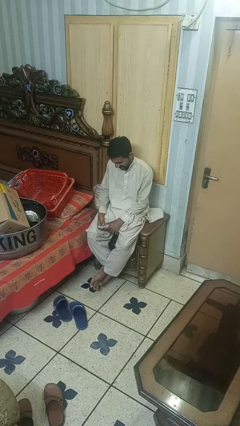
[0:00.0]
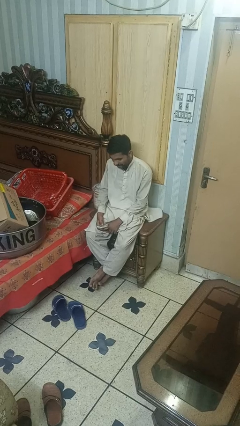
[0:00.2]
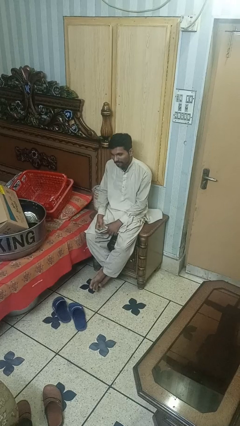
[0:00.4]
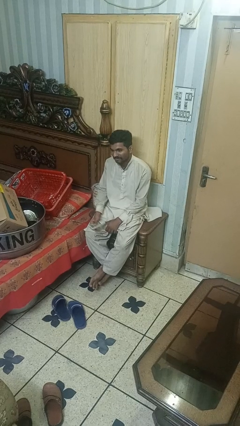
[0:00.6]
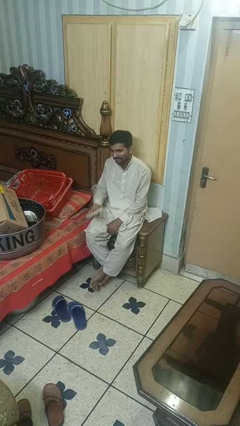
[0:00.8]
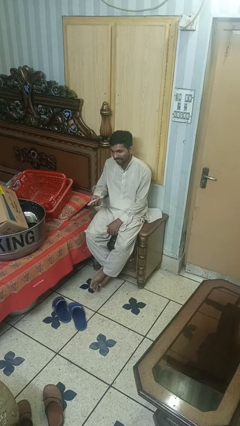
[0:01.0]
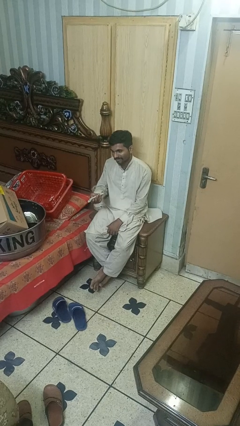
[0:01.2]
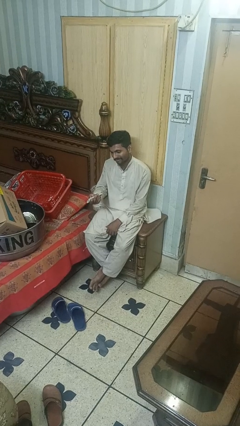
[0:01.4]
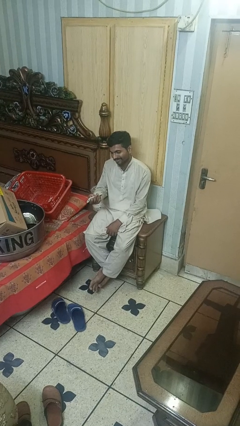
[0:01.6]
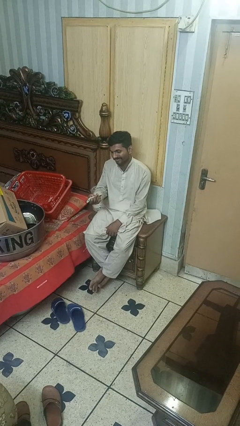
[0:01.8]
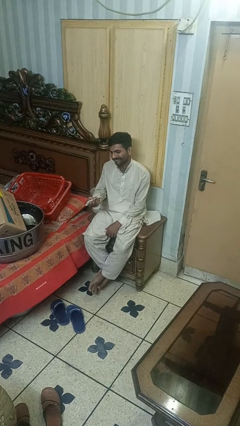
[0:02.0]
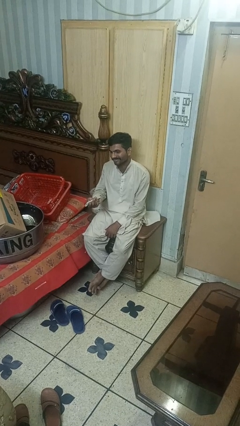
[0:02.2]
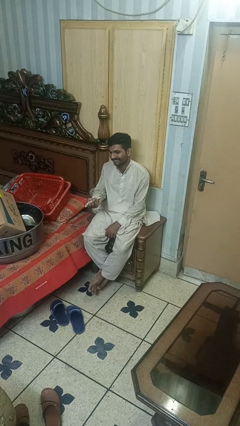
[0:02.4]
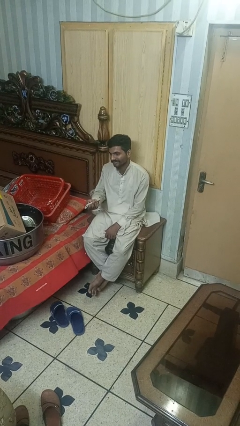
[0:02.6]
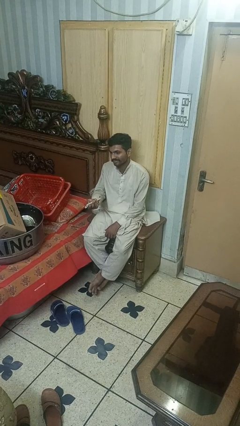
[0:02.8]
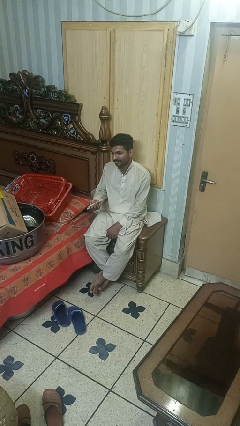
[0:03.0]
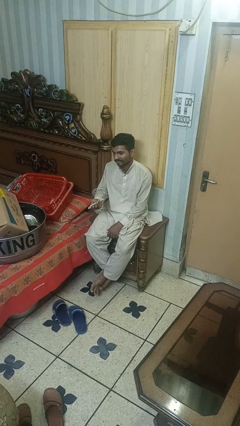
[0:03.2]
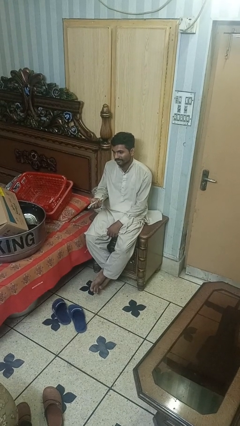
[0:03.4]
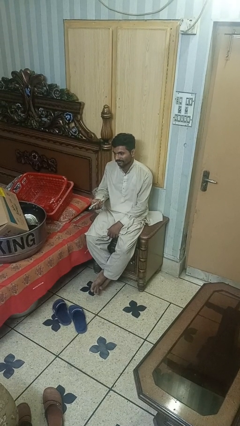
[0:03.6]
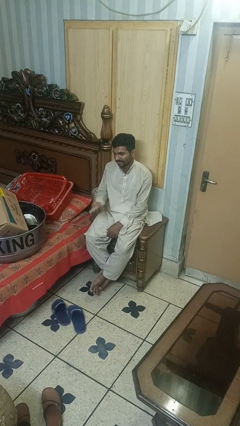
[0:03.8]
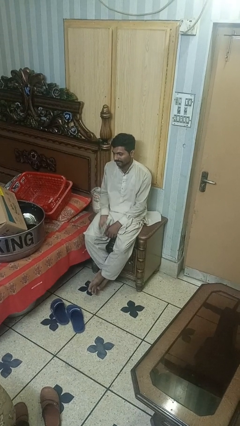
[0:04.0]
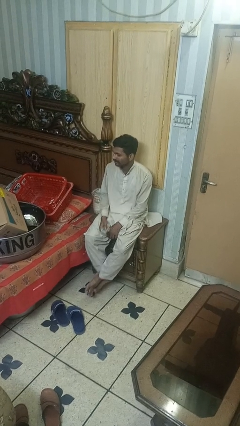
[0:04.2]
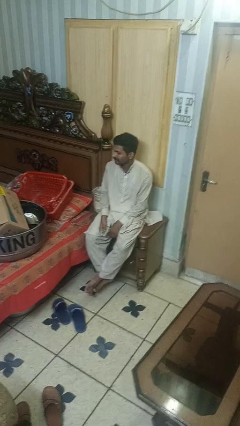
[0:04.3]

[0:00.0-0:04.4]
person uses television remote

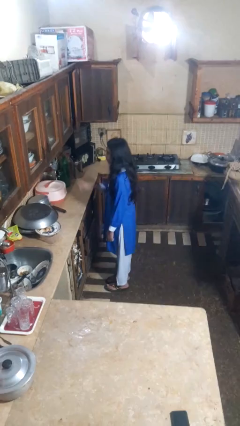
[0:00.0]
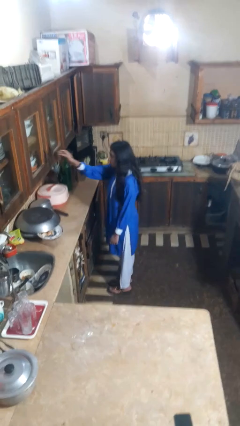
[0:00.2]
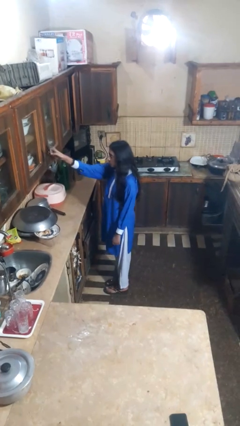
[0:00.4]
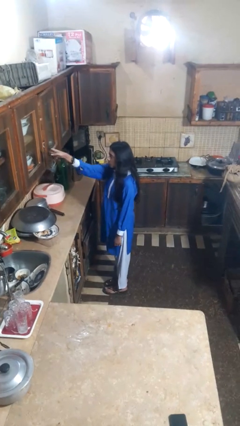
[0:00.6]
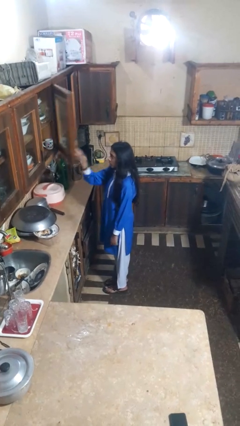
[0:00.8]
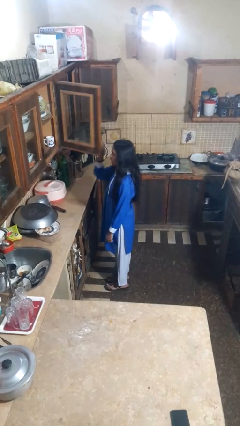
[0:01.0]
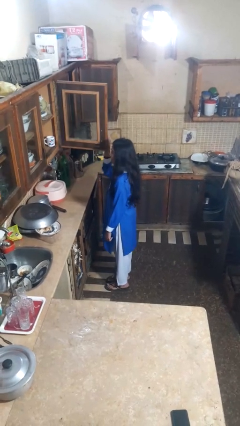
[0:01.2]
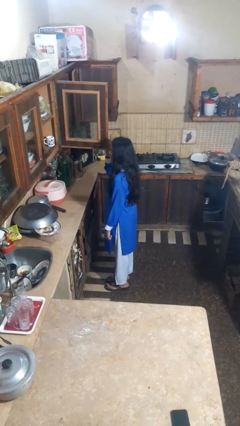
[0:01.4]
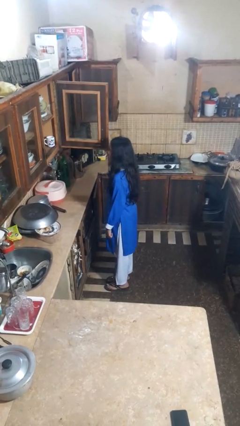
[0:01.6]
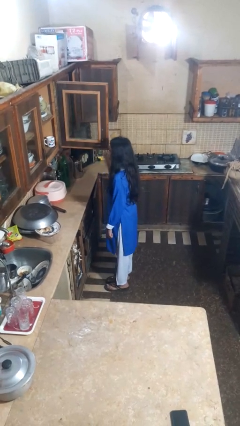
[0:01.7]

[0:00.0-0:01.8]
person opens cabinet

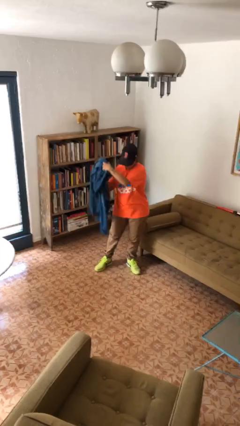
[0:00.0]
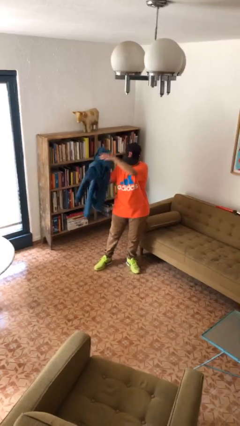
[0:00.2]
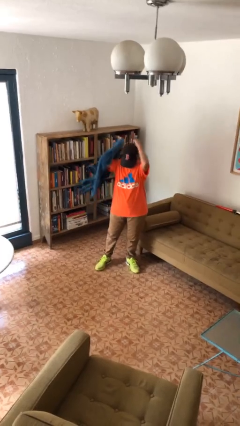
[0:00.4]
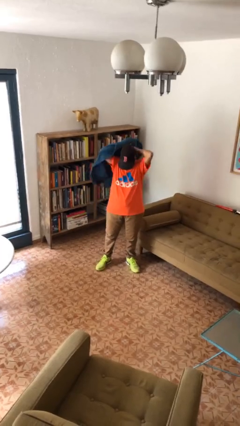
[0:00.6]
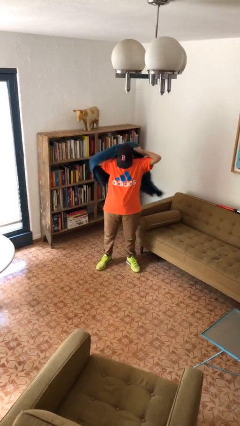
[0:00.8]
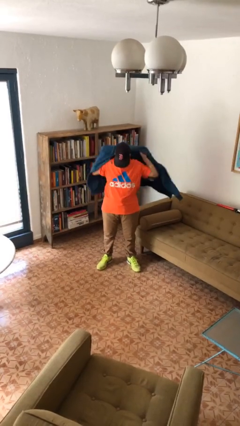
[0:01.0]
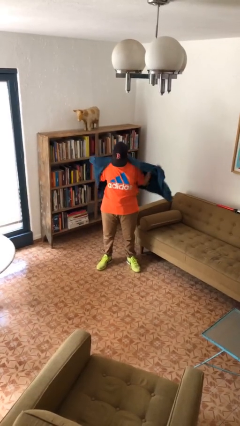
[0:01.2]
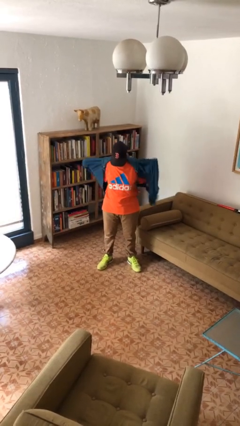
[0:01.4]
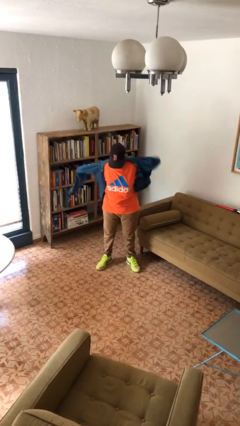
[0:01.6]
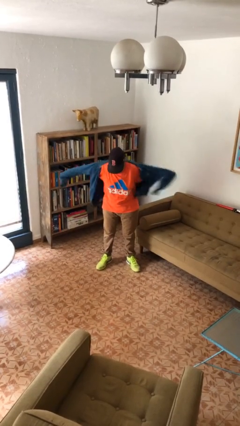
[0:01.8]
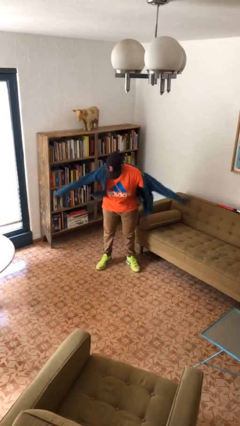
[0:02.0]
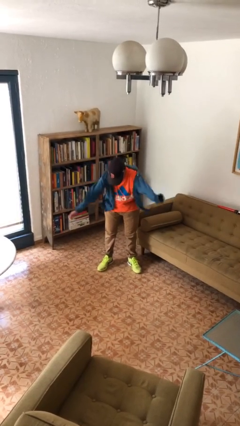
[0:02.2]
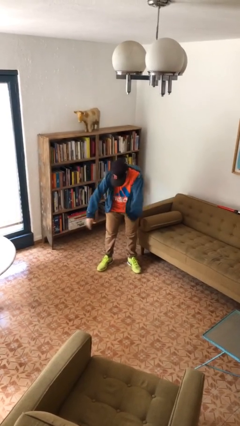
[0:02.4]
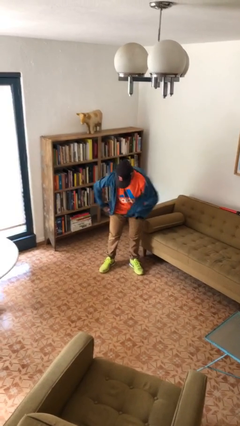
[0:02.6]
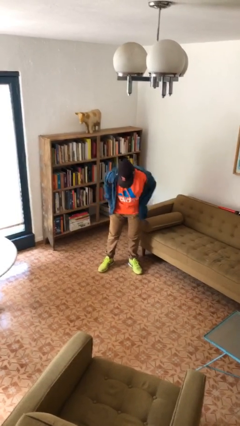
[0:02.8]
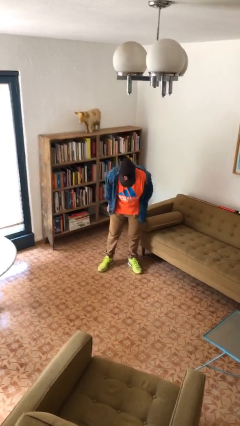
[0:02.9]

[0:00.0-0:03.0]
person puts on jacket

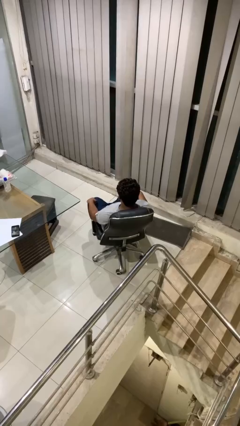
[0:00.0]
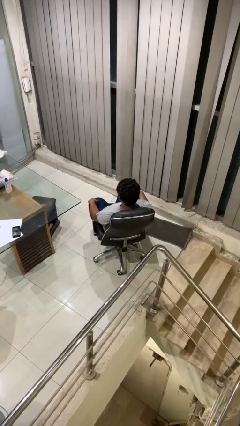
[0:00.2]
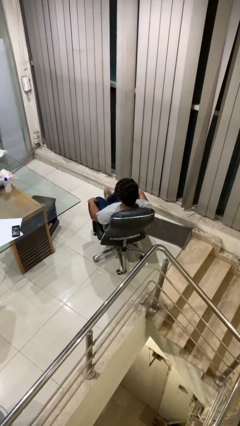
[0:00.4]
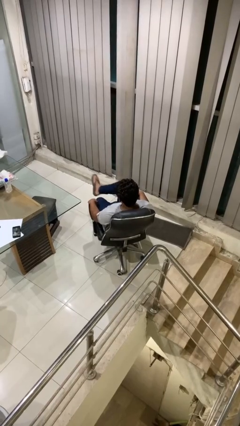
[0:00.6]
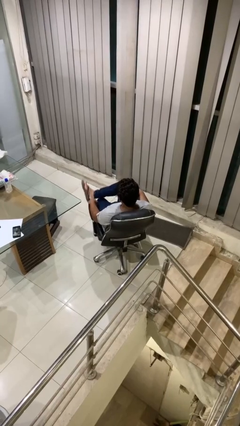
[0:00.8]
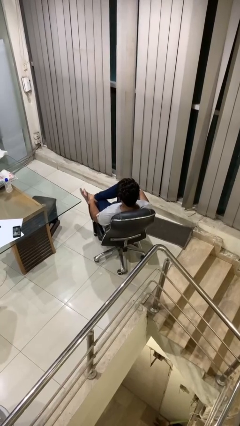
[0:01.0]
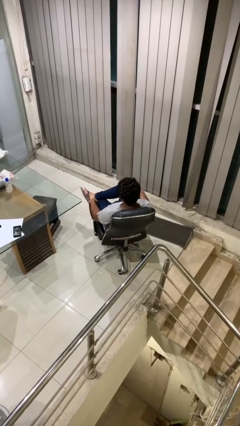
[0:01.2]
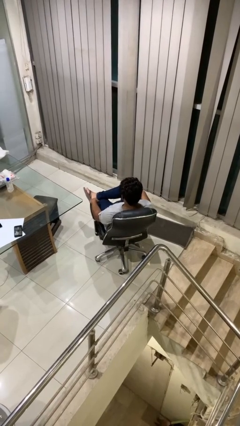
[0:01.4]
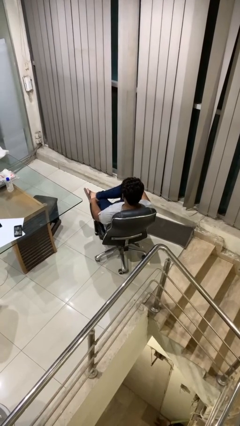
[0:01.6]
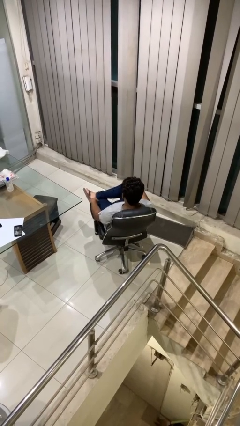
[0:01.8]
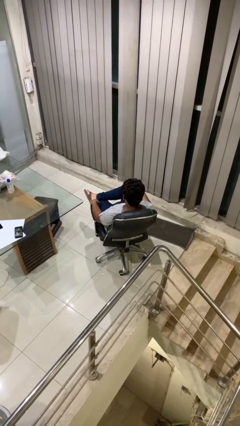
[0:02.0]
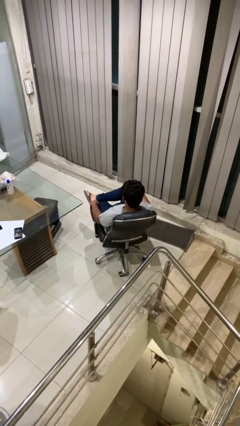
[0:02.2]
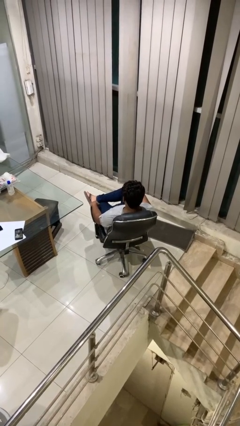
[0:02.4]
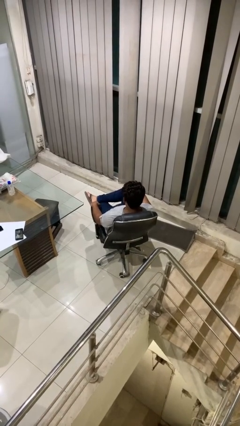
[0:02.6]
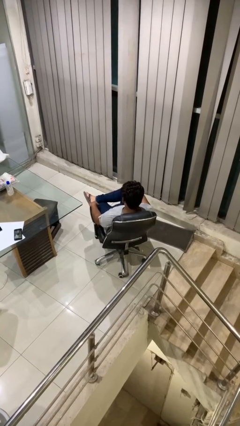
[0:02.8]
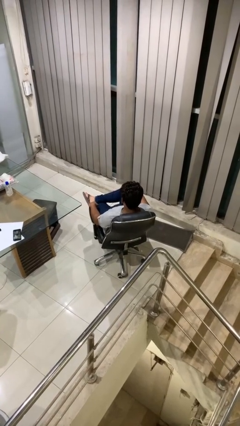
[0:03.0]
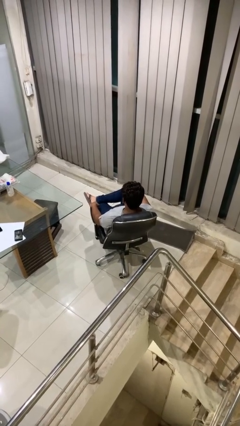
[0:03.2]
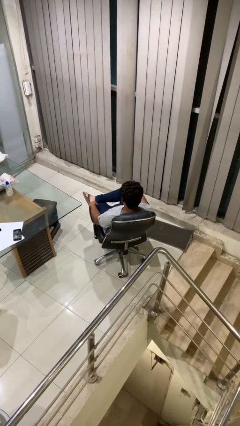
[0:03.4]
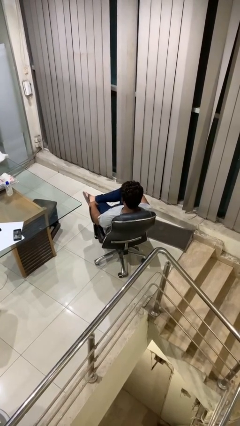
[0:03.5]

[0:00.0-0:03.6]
person crosses legs

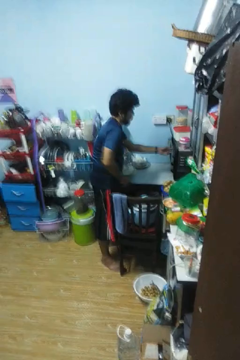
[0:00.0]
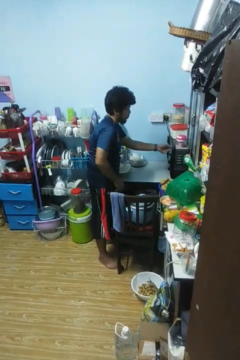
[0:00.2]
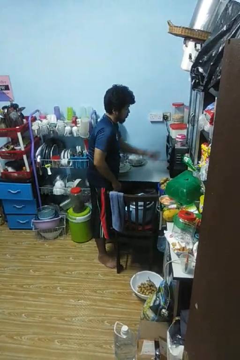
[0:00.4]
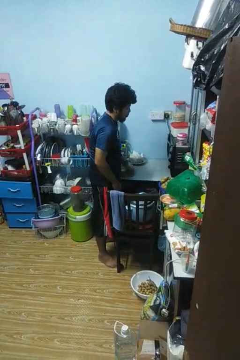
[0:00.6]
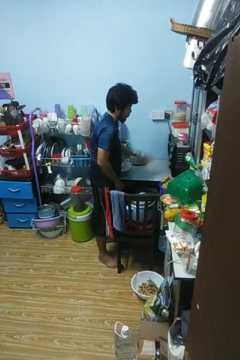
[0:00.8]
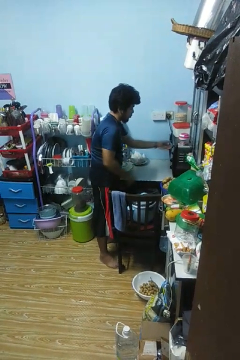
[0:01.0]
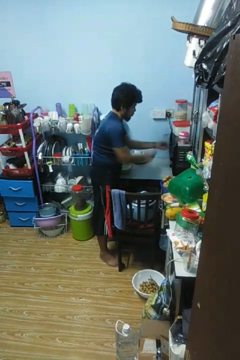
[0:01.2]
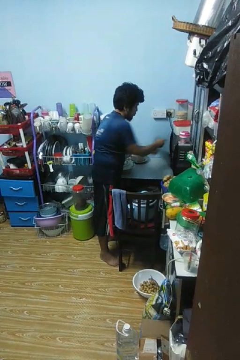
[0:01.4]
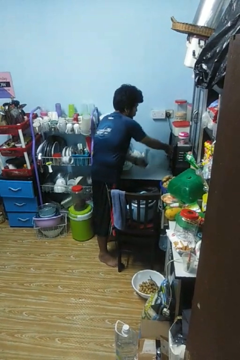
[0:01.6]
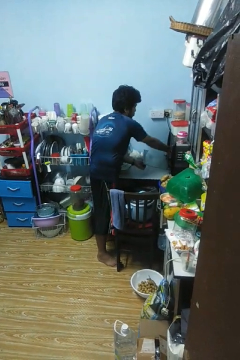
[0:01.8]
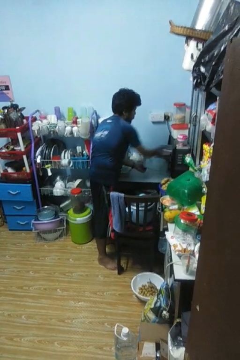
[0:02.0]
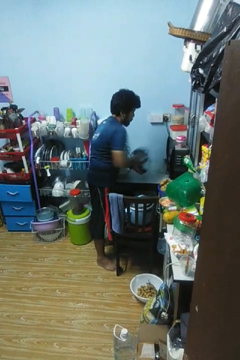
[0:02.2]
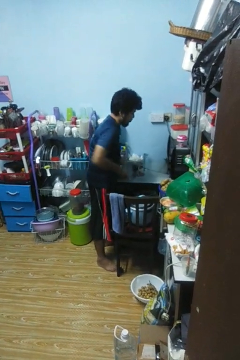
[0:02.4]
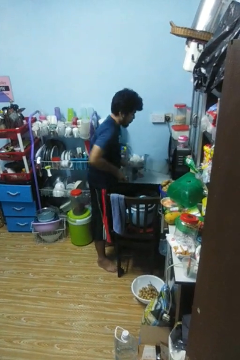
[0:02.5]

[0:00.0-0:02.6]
person takes object from oven

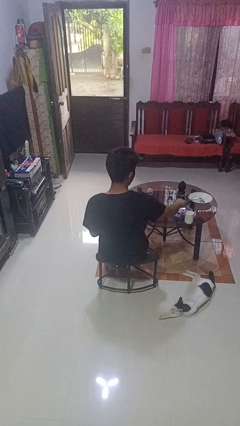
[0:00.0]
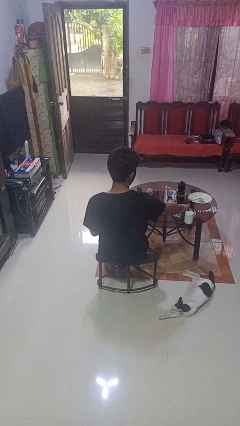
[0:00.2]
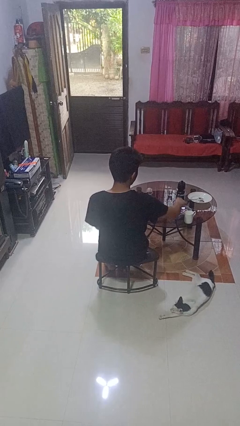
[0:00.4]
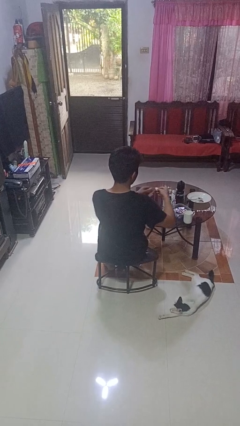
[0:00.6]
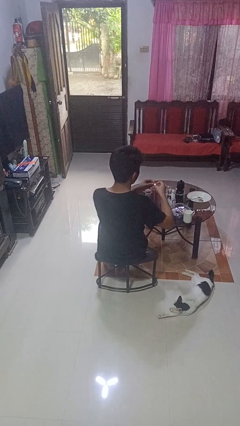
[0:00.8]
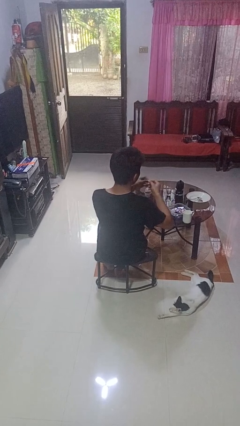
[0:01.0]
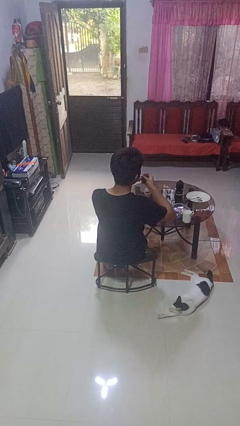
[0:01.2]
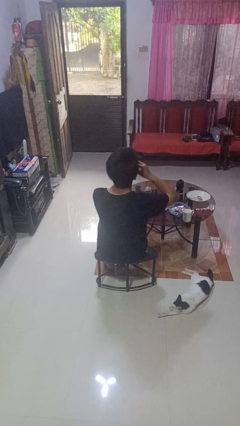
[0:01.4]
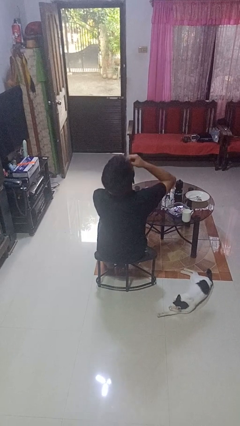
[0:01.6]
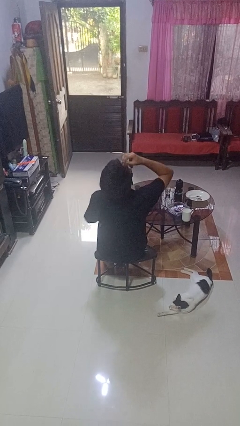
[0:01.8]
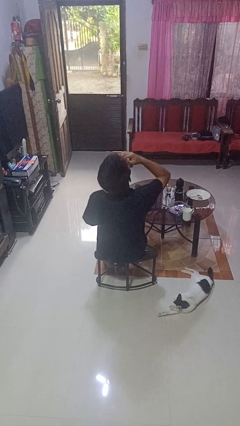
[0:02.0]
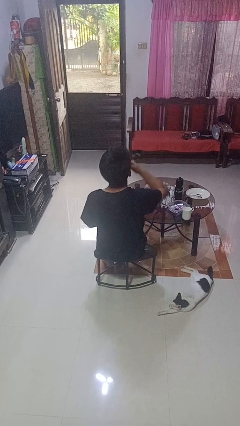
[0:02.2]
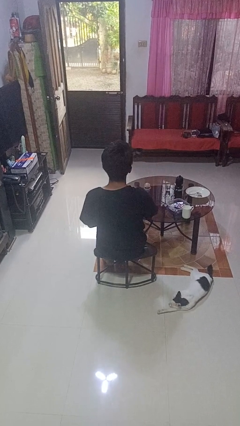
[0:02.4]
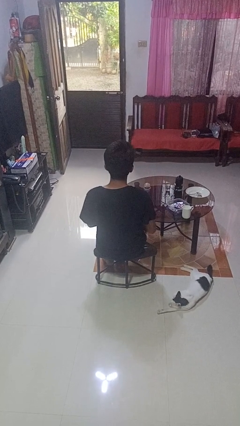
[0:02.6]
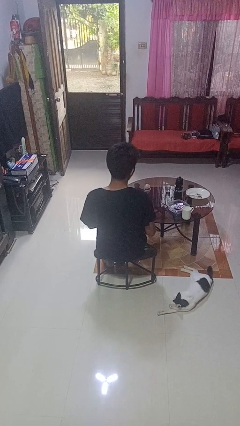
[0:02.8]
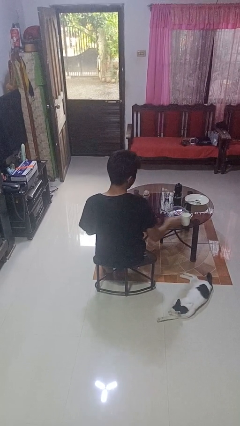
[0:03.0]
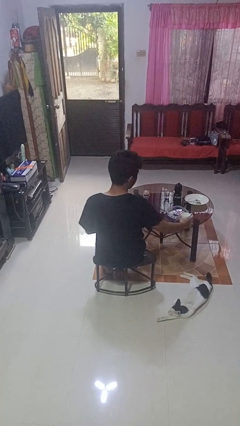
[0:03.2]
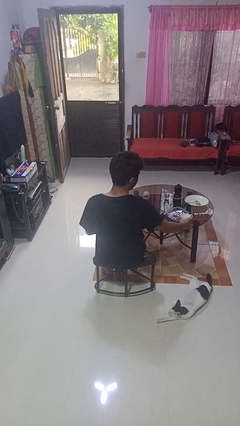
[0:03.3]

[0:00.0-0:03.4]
person takes medicine pills
